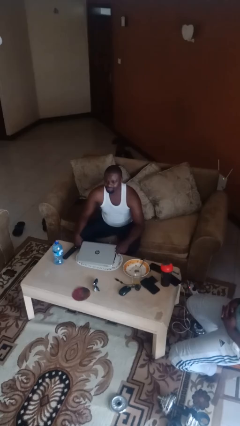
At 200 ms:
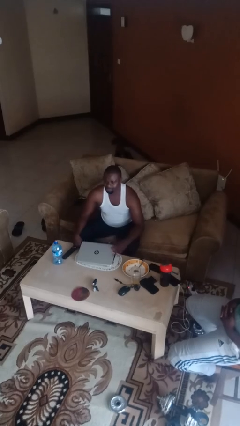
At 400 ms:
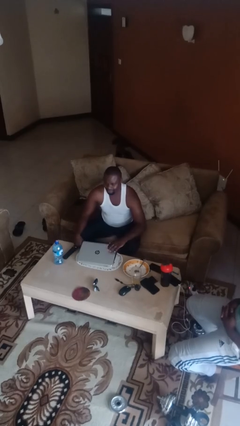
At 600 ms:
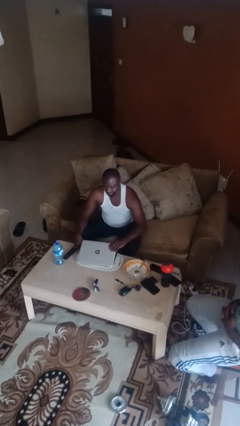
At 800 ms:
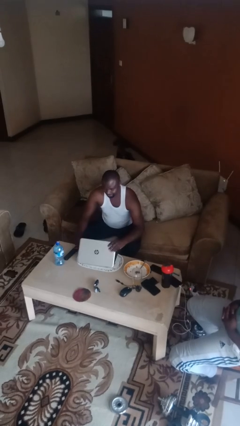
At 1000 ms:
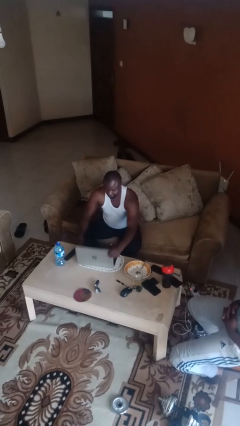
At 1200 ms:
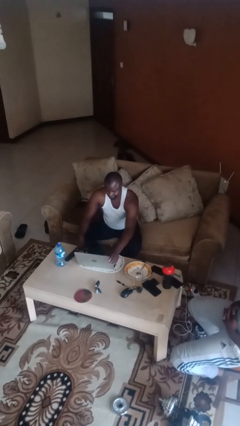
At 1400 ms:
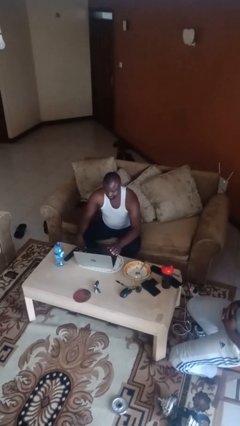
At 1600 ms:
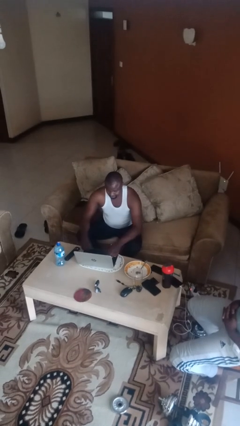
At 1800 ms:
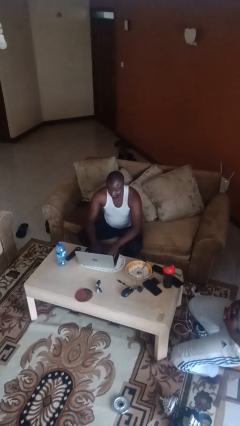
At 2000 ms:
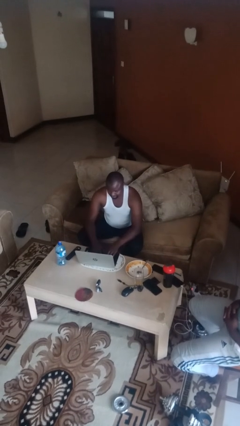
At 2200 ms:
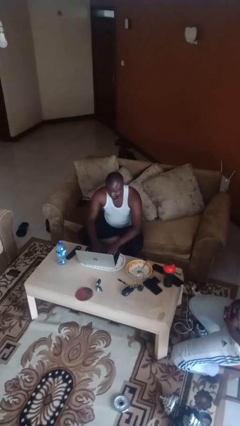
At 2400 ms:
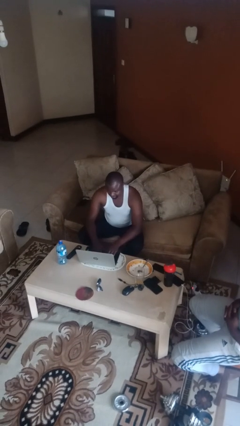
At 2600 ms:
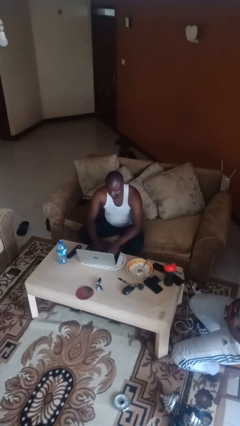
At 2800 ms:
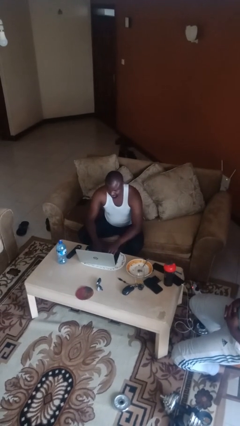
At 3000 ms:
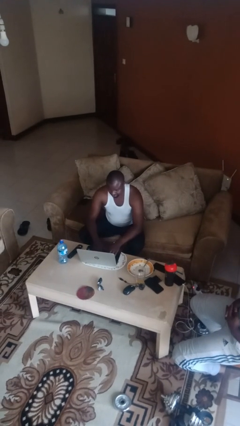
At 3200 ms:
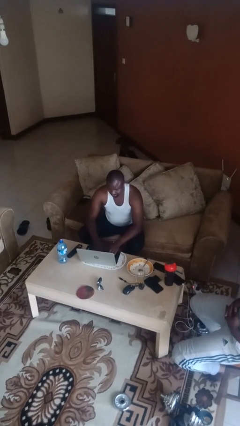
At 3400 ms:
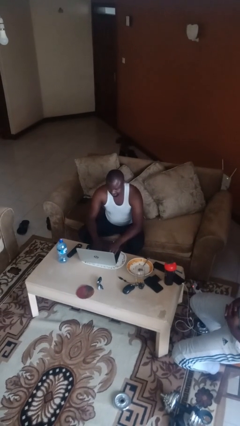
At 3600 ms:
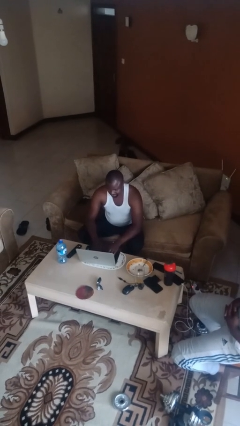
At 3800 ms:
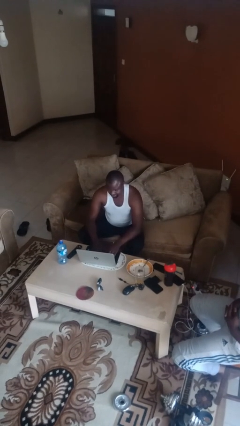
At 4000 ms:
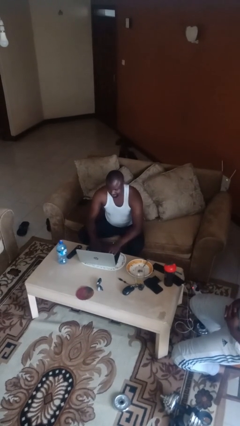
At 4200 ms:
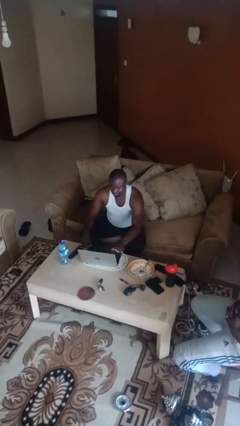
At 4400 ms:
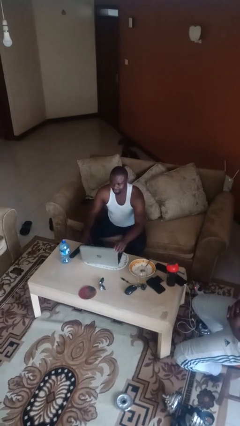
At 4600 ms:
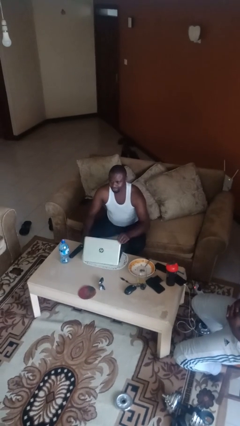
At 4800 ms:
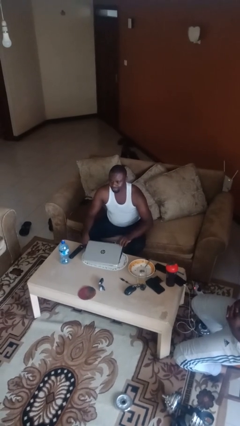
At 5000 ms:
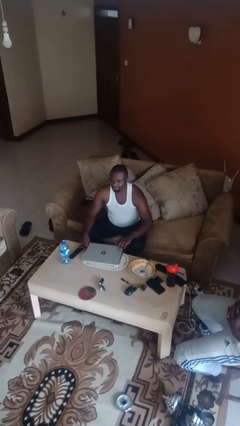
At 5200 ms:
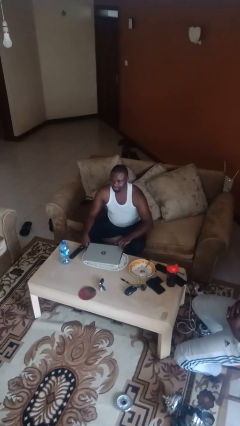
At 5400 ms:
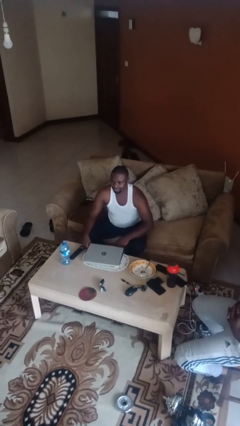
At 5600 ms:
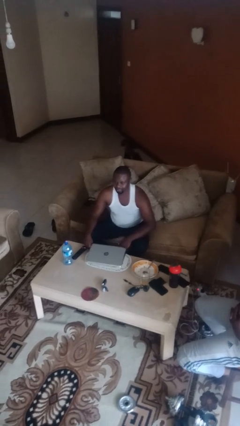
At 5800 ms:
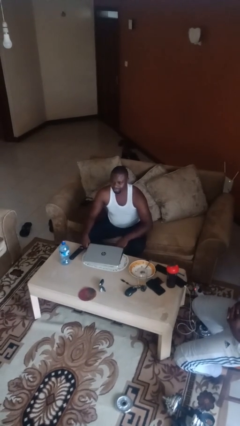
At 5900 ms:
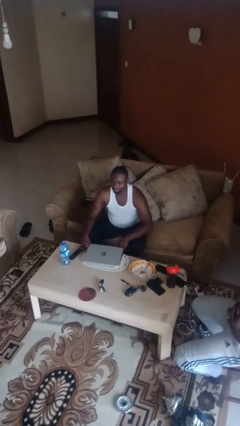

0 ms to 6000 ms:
person interacts with laptop

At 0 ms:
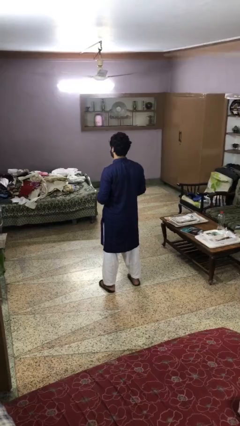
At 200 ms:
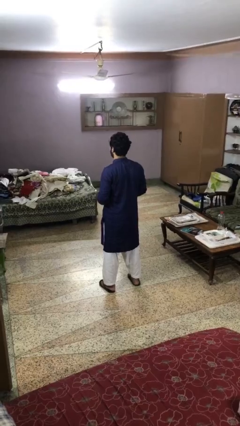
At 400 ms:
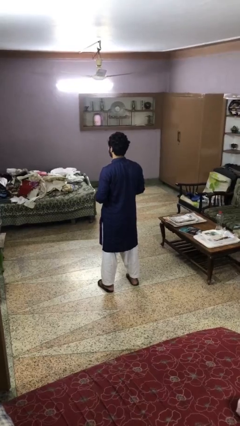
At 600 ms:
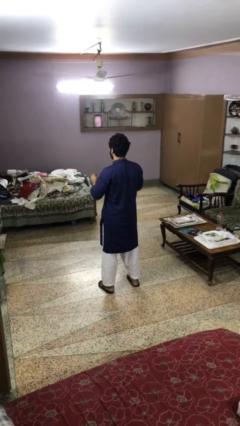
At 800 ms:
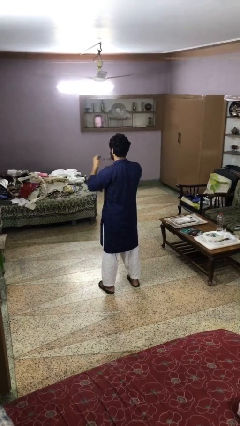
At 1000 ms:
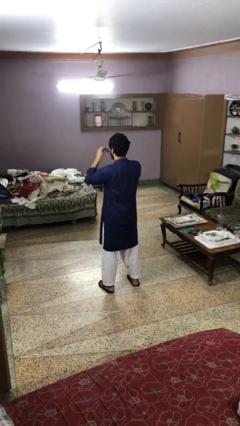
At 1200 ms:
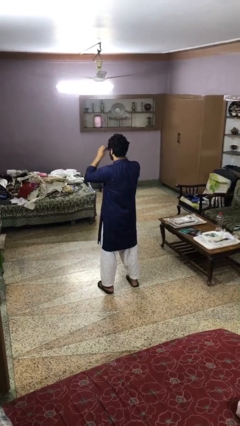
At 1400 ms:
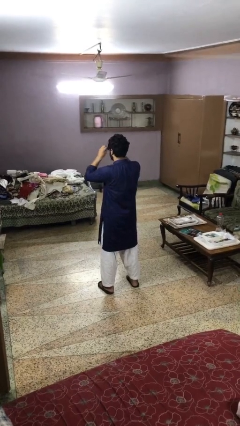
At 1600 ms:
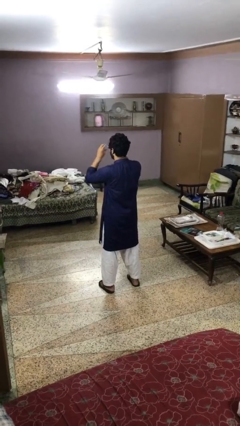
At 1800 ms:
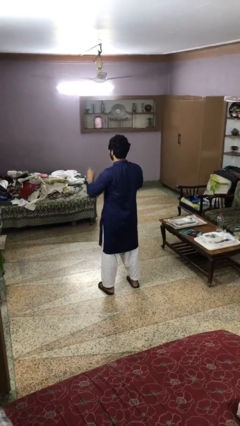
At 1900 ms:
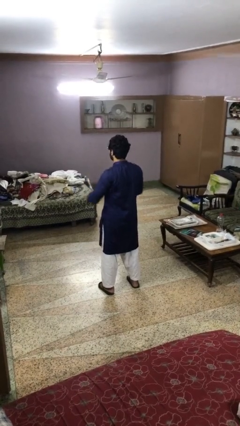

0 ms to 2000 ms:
person puts on sunglasses

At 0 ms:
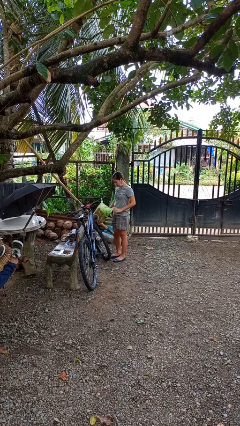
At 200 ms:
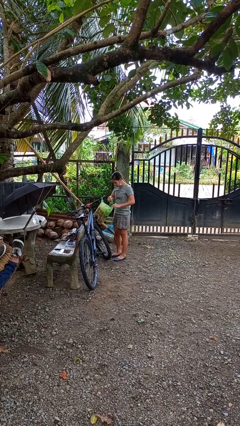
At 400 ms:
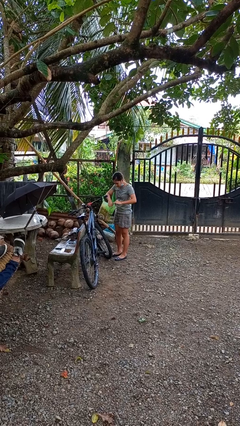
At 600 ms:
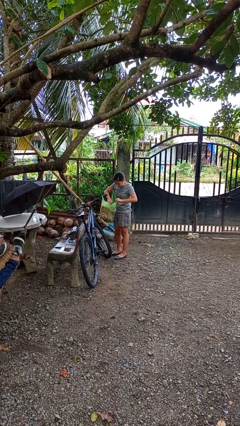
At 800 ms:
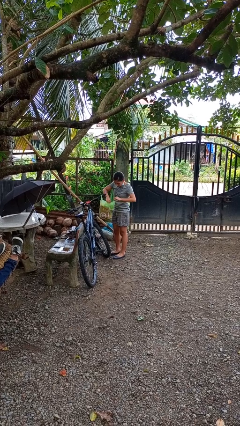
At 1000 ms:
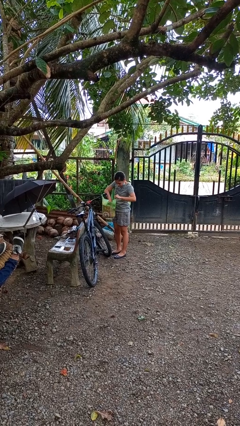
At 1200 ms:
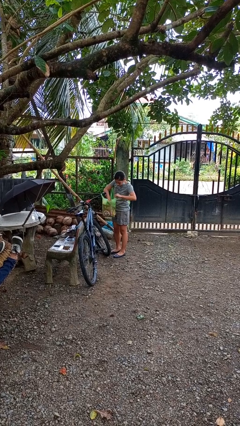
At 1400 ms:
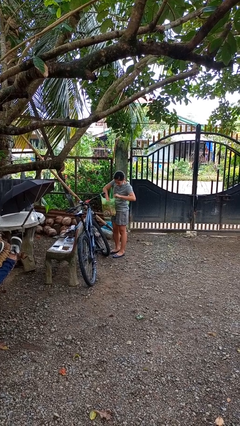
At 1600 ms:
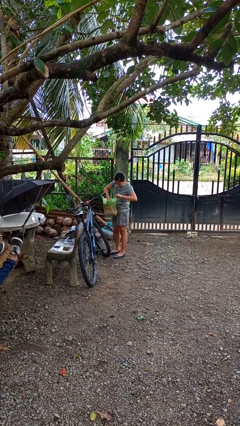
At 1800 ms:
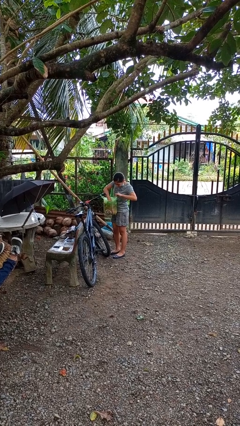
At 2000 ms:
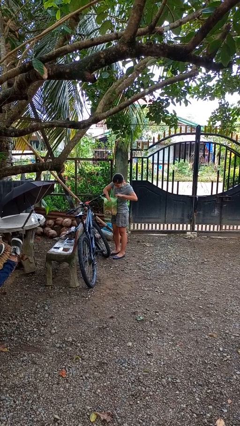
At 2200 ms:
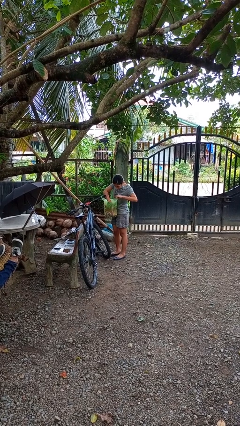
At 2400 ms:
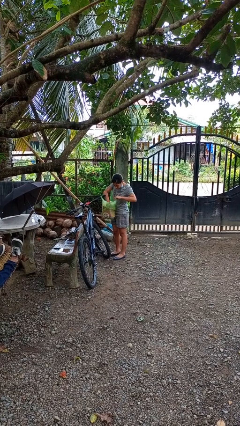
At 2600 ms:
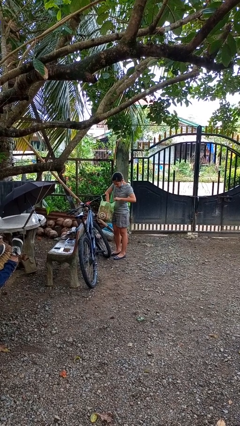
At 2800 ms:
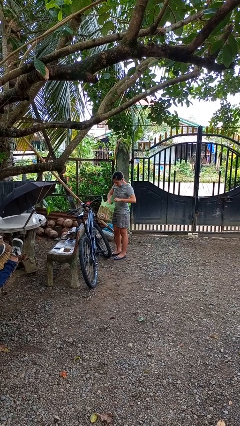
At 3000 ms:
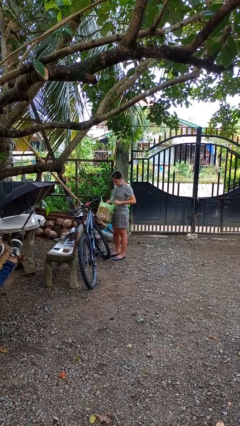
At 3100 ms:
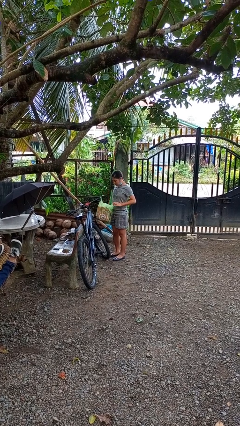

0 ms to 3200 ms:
person searches in bag

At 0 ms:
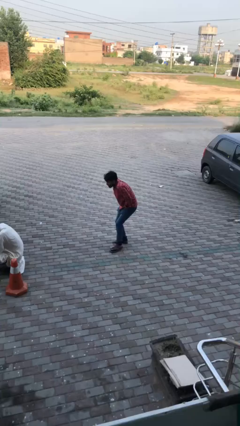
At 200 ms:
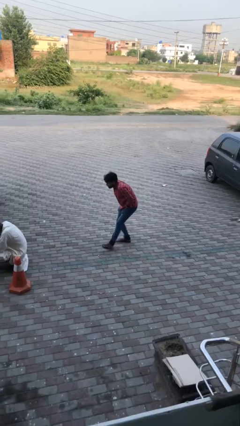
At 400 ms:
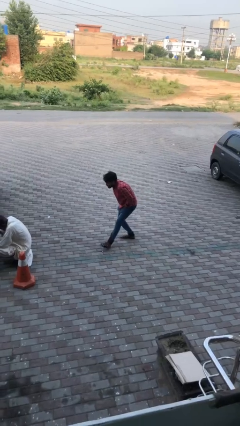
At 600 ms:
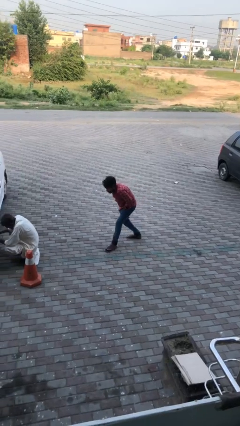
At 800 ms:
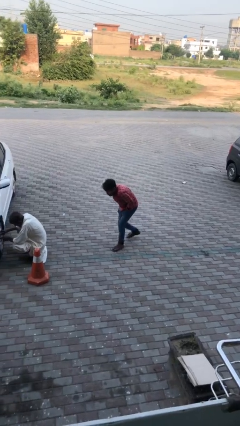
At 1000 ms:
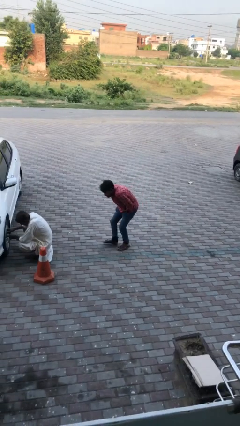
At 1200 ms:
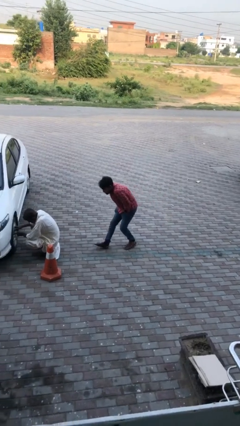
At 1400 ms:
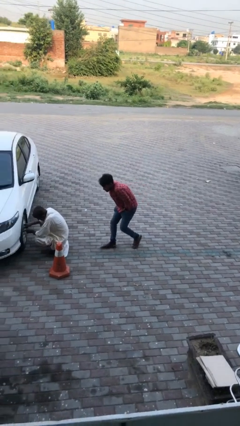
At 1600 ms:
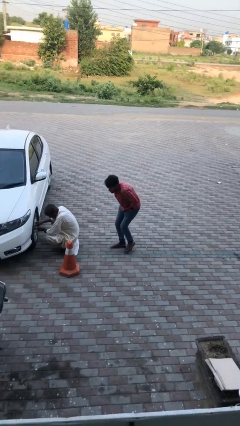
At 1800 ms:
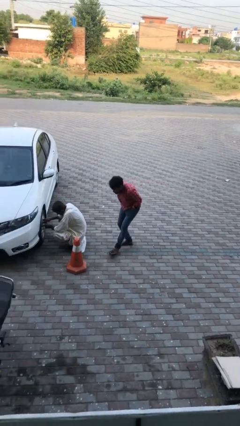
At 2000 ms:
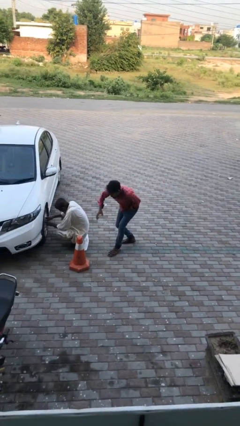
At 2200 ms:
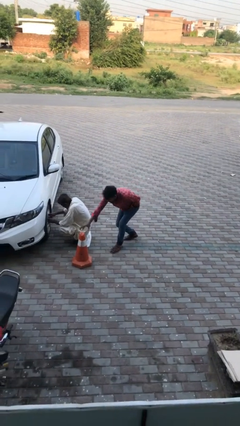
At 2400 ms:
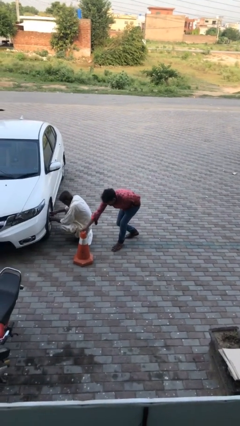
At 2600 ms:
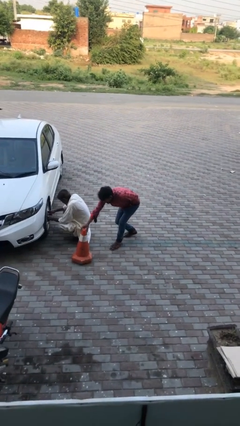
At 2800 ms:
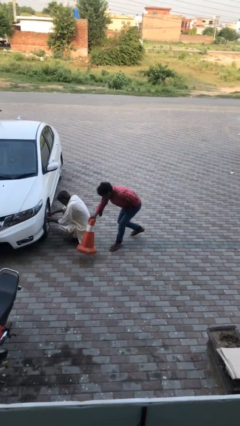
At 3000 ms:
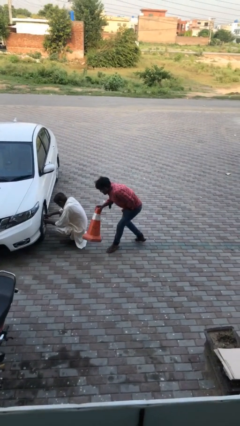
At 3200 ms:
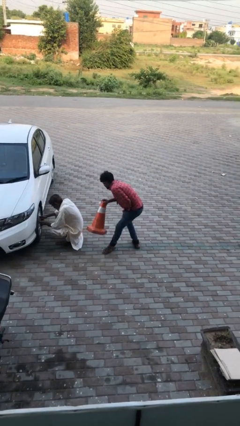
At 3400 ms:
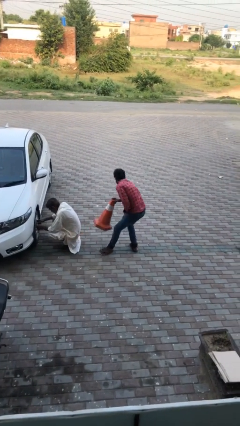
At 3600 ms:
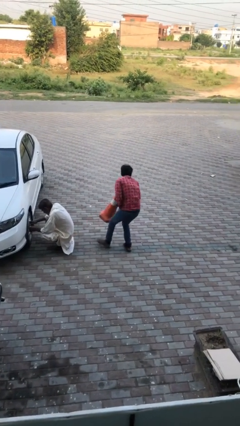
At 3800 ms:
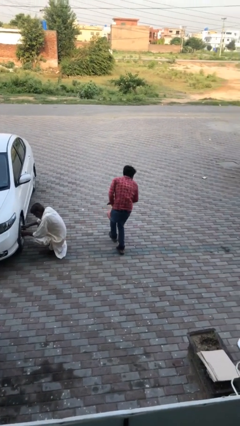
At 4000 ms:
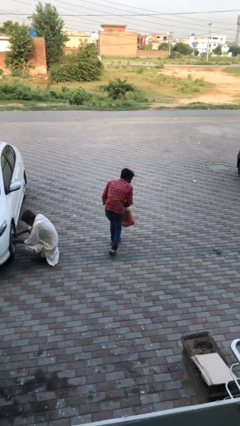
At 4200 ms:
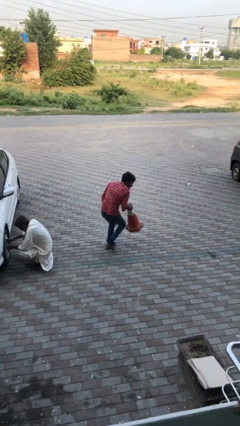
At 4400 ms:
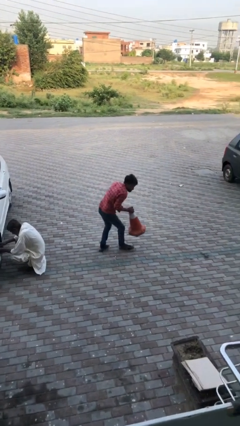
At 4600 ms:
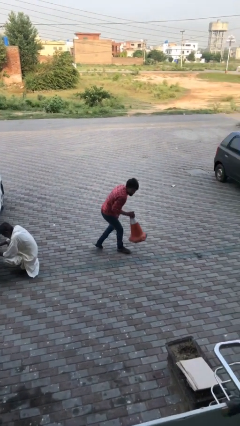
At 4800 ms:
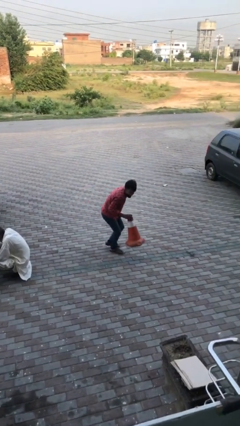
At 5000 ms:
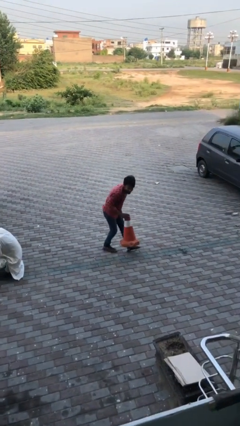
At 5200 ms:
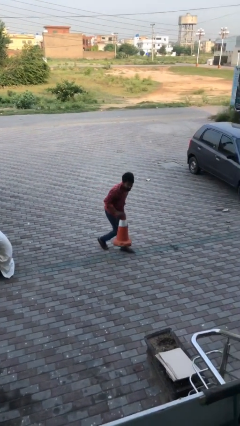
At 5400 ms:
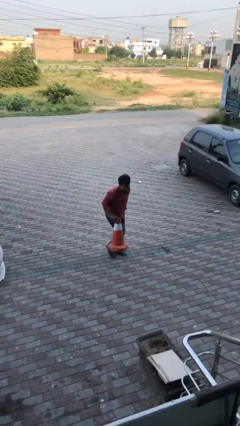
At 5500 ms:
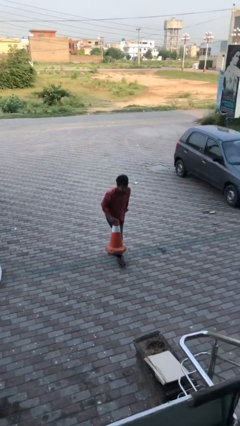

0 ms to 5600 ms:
person steals object from person

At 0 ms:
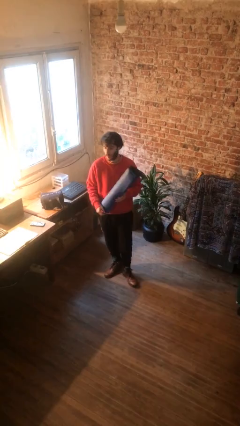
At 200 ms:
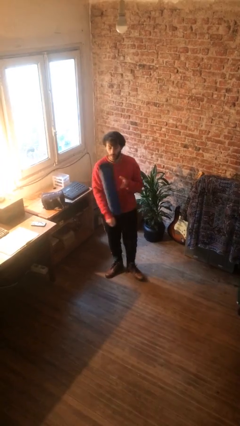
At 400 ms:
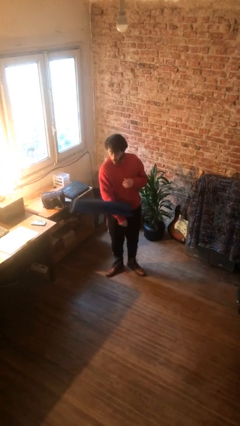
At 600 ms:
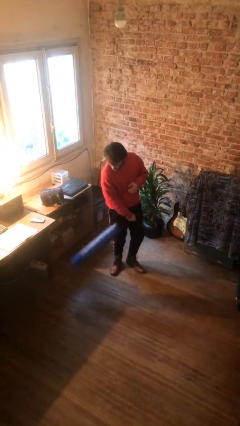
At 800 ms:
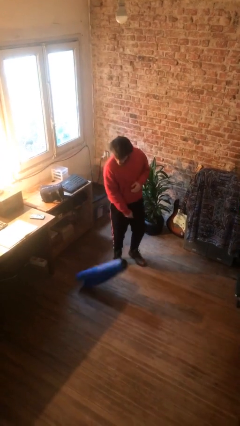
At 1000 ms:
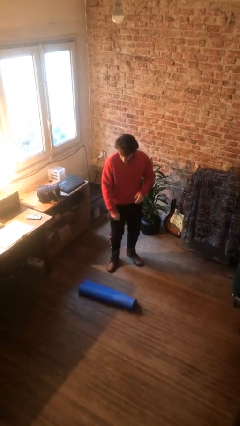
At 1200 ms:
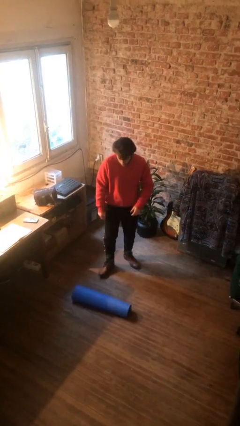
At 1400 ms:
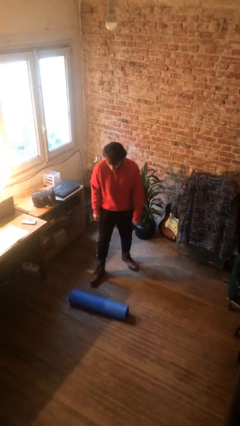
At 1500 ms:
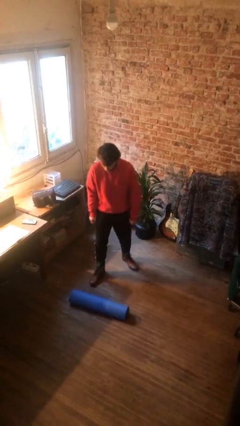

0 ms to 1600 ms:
person drops object
